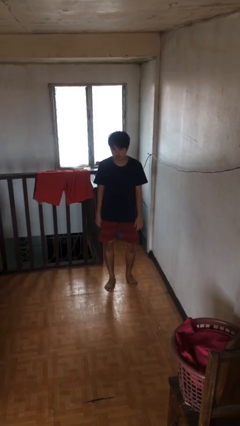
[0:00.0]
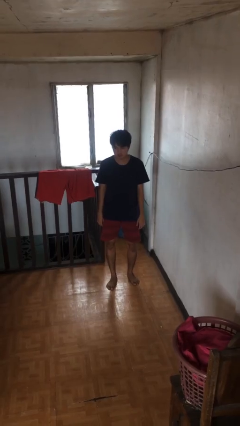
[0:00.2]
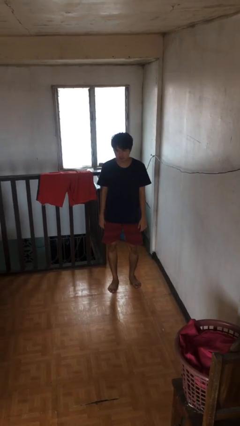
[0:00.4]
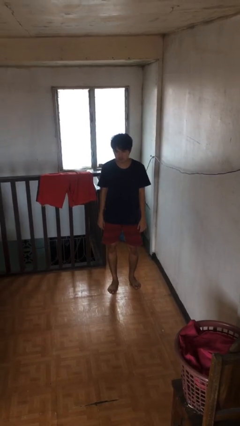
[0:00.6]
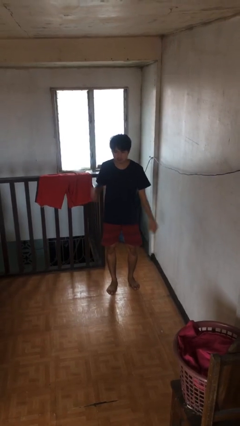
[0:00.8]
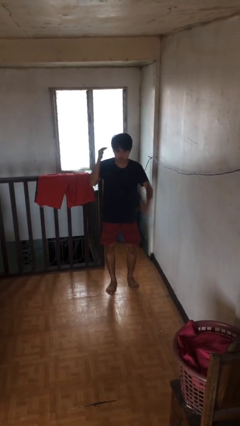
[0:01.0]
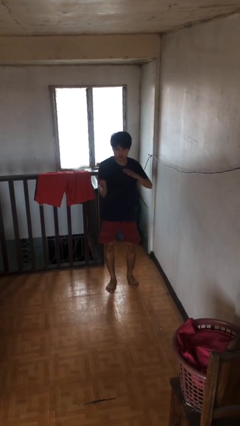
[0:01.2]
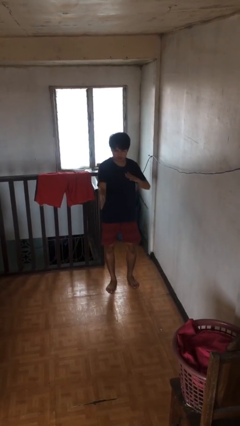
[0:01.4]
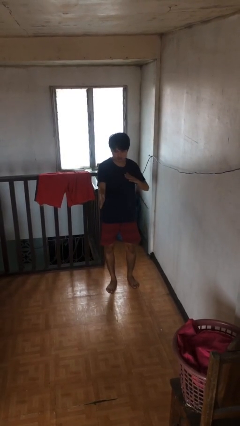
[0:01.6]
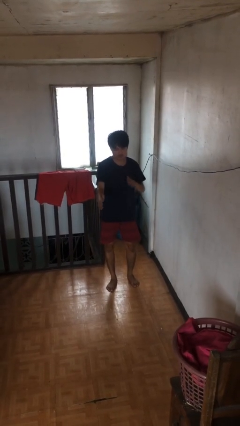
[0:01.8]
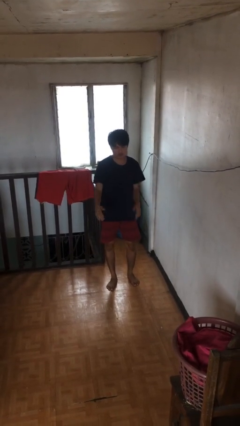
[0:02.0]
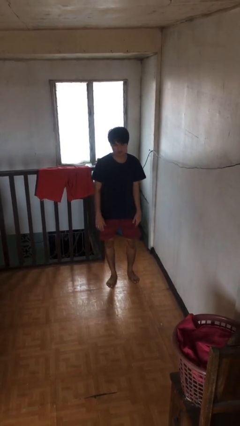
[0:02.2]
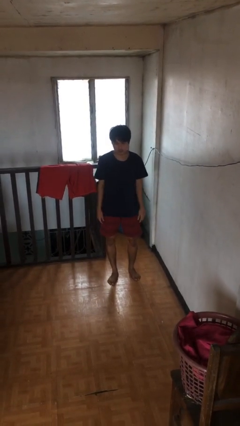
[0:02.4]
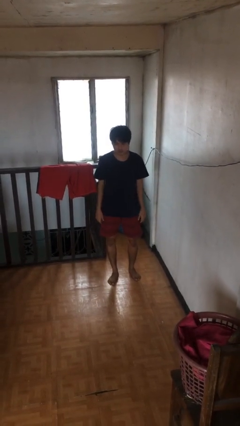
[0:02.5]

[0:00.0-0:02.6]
person karate chop

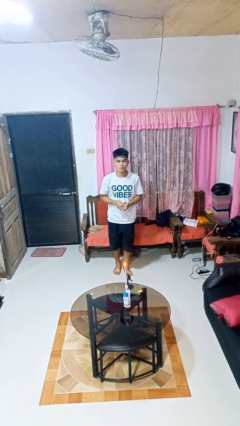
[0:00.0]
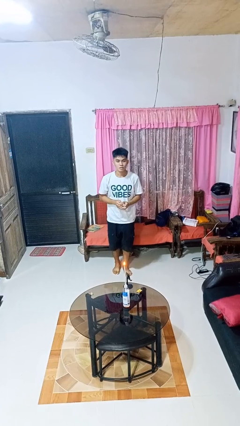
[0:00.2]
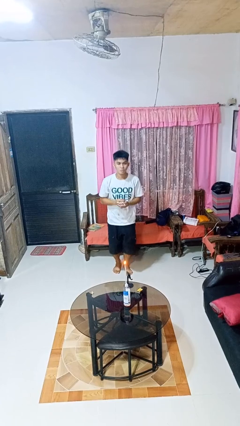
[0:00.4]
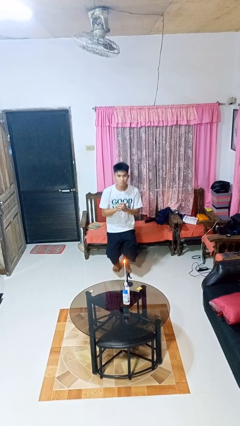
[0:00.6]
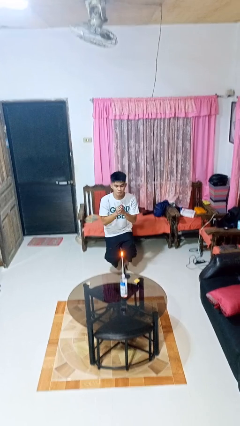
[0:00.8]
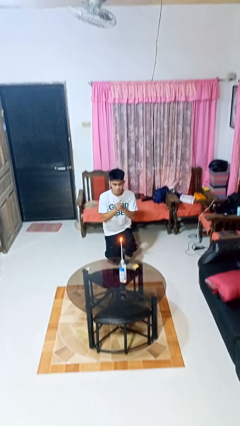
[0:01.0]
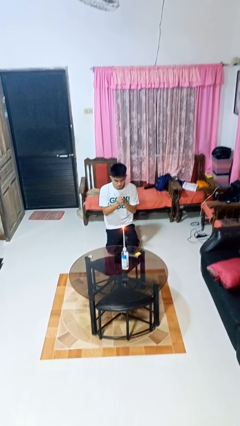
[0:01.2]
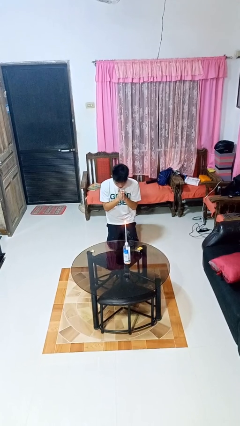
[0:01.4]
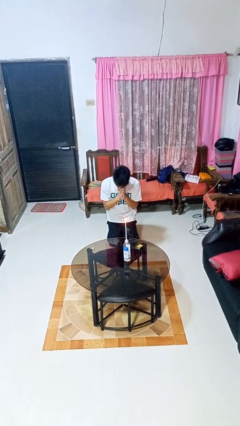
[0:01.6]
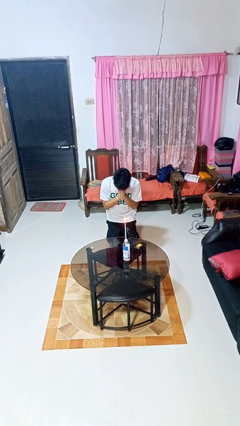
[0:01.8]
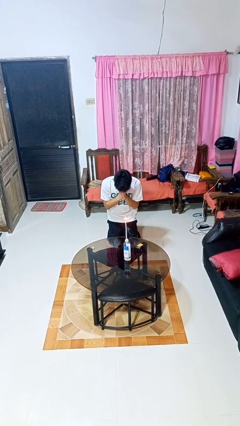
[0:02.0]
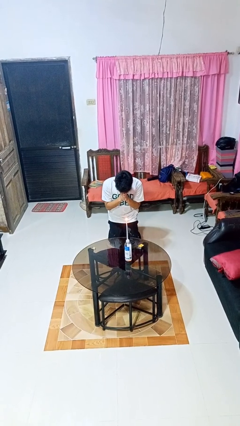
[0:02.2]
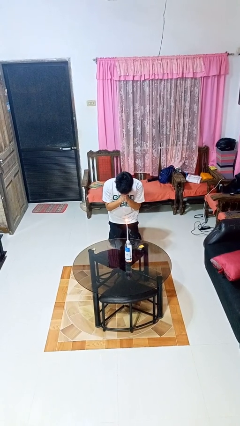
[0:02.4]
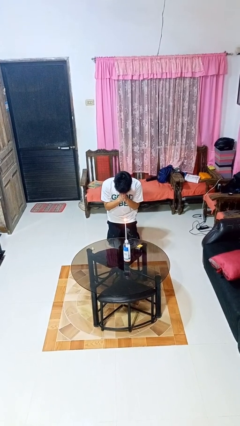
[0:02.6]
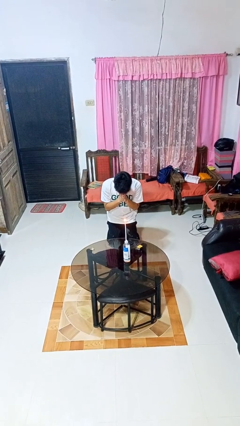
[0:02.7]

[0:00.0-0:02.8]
person prays

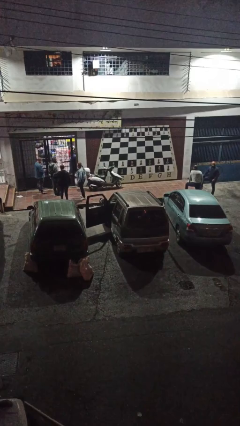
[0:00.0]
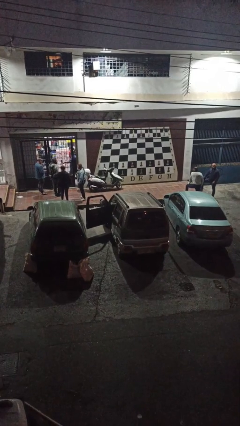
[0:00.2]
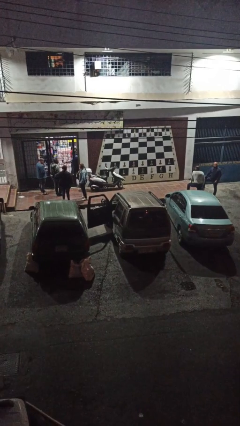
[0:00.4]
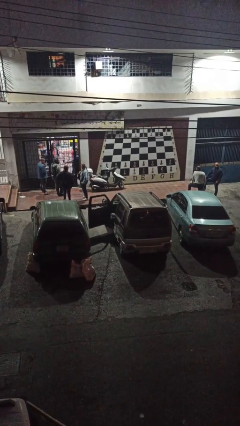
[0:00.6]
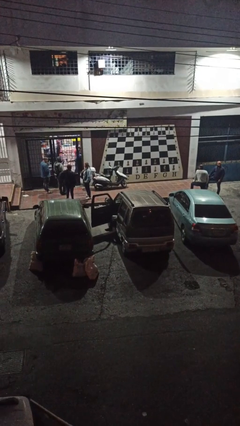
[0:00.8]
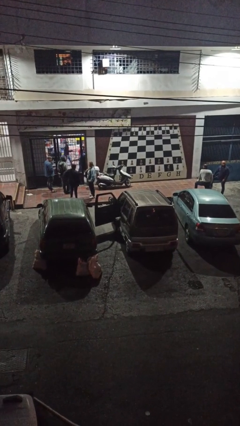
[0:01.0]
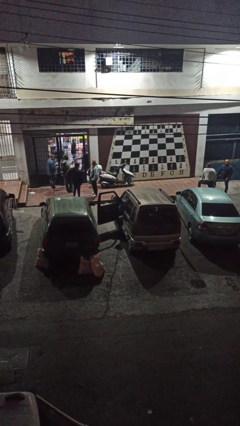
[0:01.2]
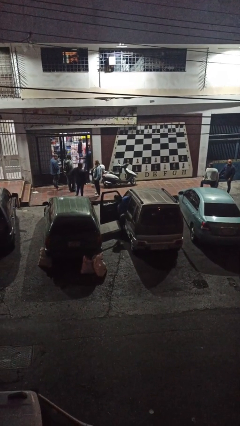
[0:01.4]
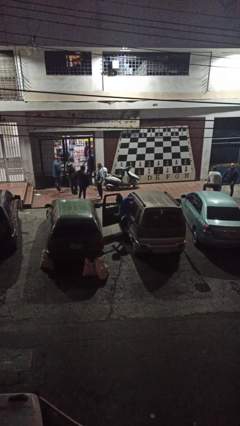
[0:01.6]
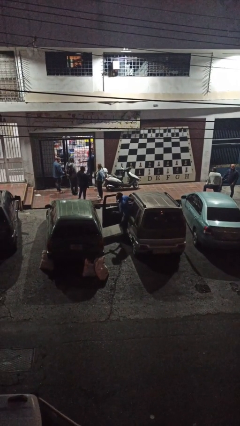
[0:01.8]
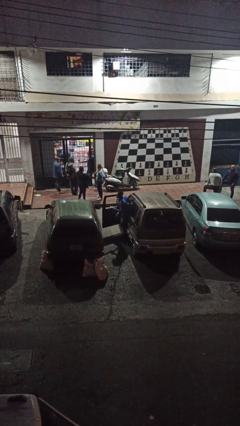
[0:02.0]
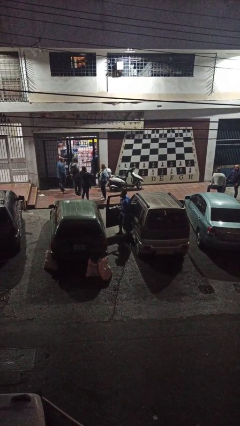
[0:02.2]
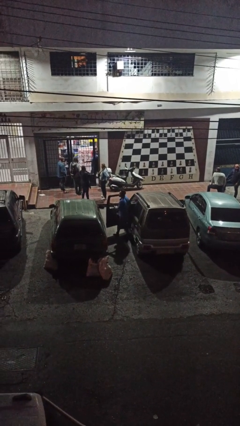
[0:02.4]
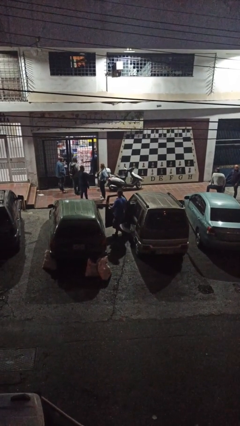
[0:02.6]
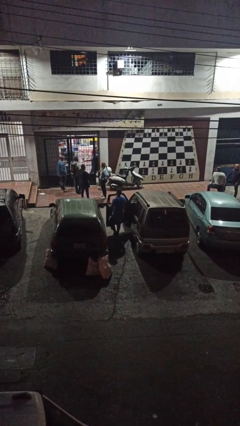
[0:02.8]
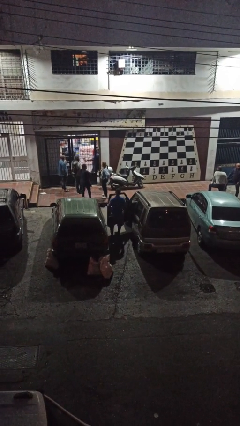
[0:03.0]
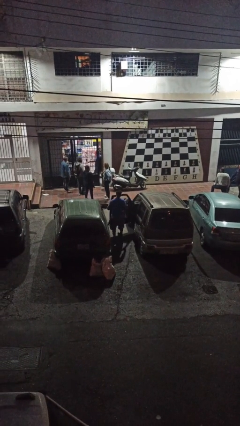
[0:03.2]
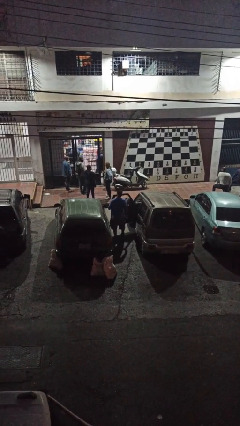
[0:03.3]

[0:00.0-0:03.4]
person exits car

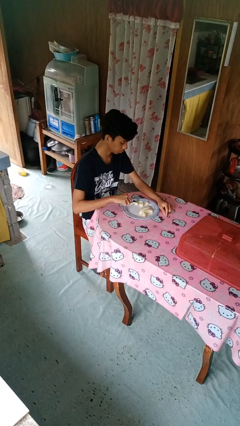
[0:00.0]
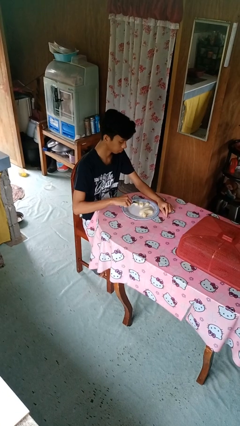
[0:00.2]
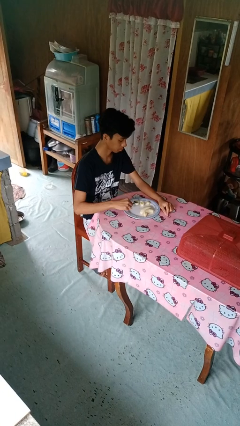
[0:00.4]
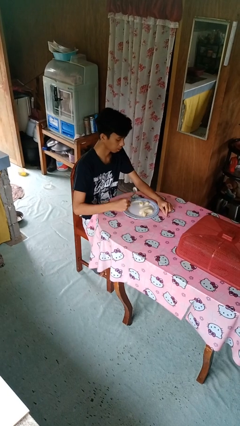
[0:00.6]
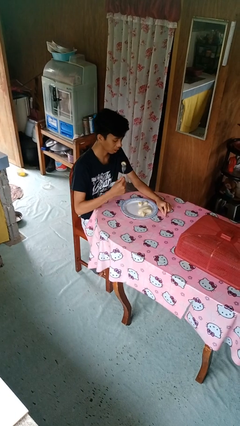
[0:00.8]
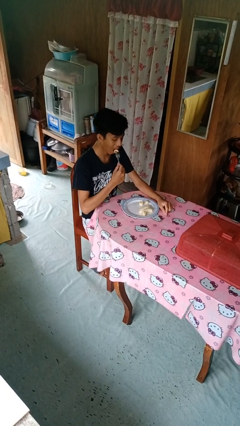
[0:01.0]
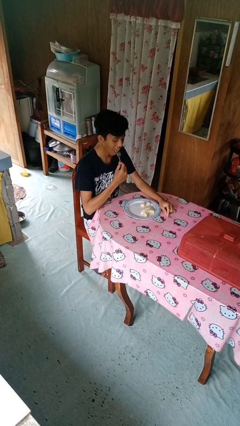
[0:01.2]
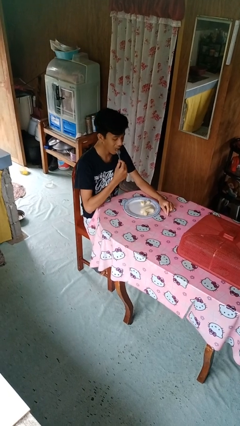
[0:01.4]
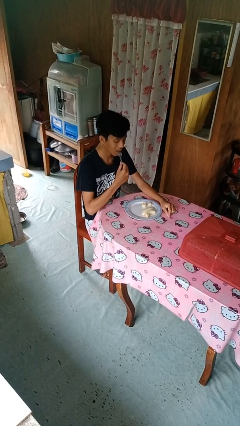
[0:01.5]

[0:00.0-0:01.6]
person eats with utensil

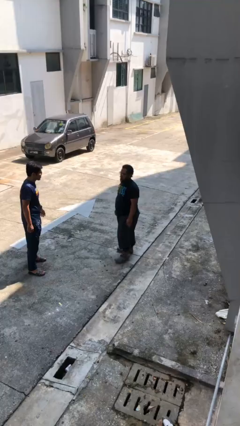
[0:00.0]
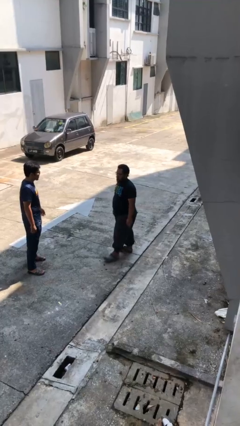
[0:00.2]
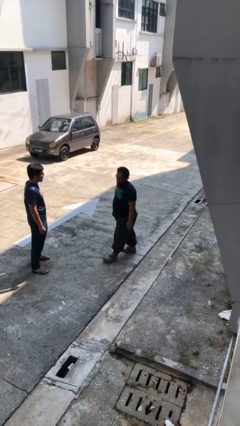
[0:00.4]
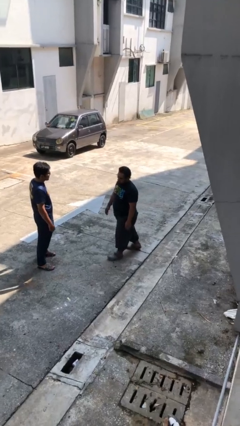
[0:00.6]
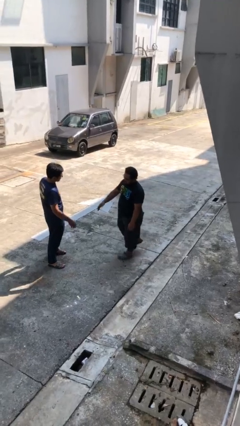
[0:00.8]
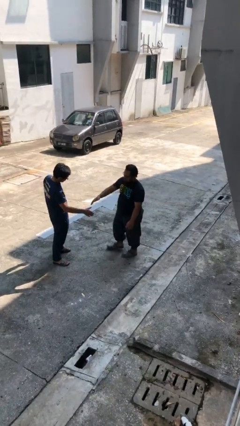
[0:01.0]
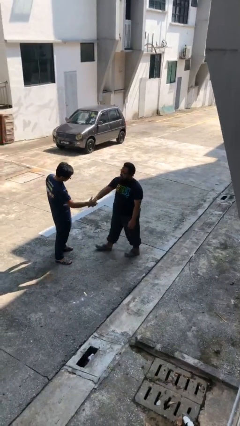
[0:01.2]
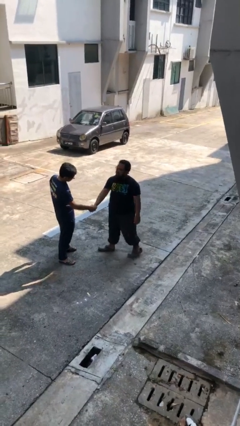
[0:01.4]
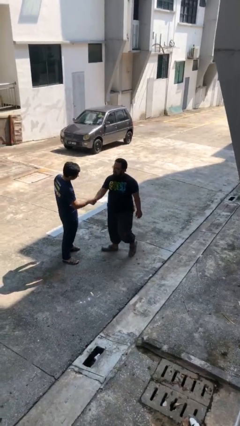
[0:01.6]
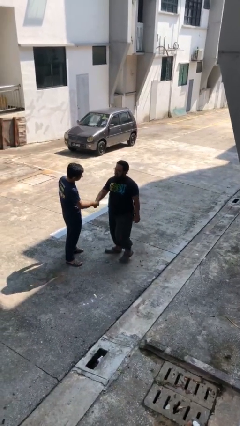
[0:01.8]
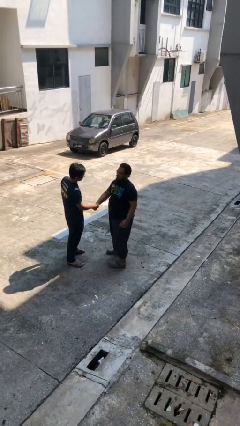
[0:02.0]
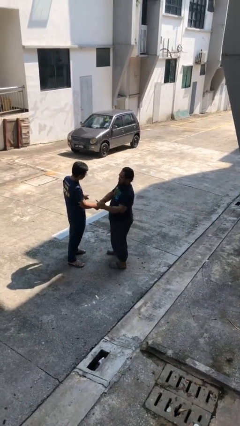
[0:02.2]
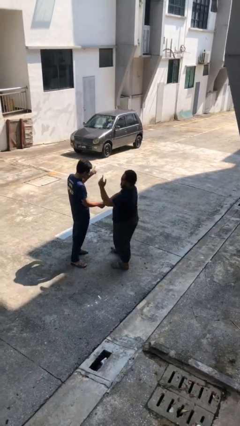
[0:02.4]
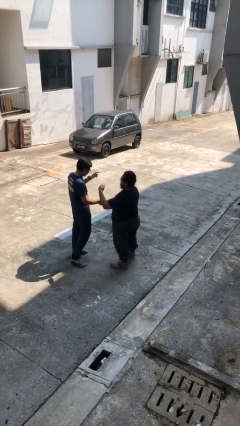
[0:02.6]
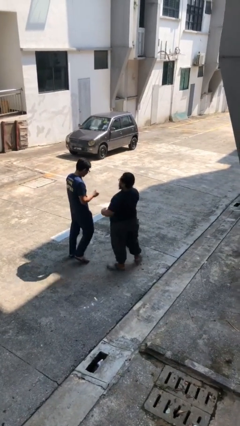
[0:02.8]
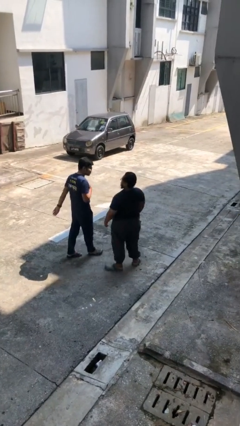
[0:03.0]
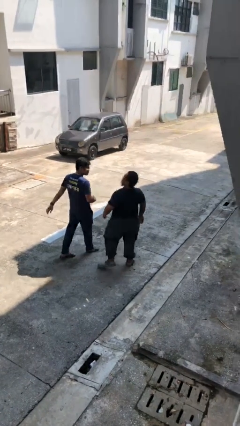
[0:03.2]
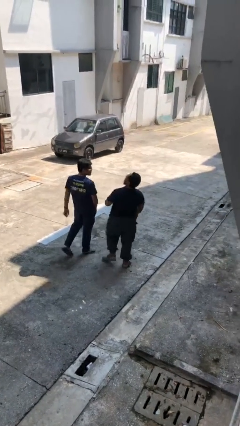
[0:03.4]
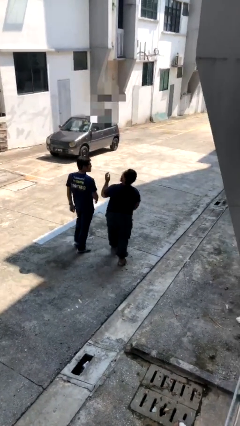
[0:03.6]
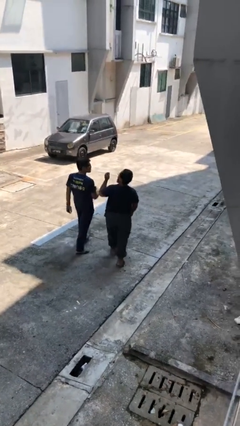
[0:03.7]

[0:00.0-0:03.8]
person shakes hand

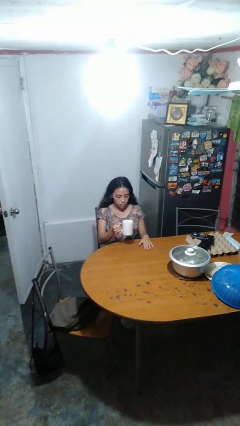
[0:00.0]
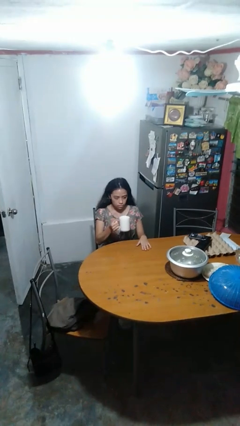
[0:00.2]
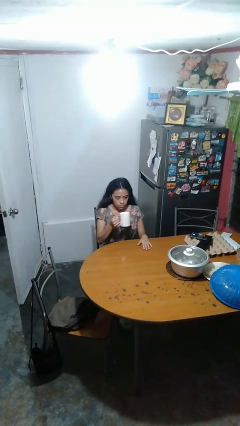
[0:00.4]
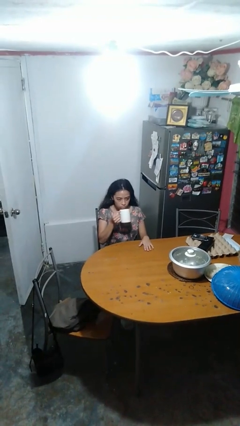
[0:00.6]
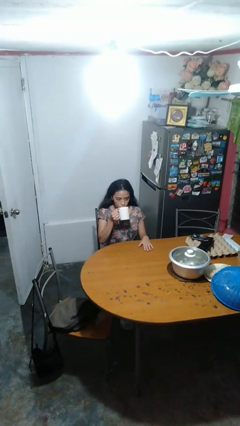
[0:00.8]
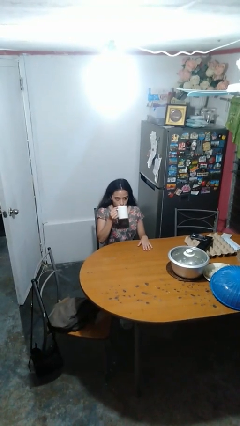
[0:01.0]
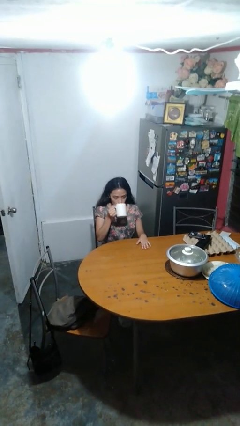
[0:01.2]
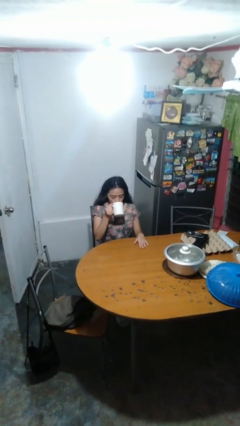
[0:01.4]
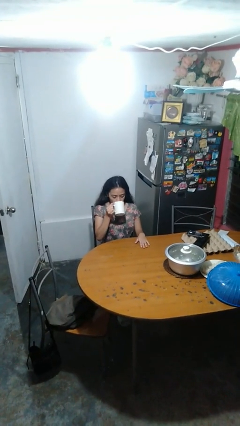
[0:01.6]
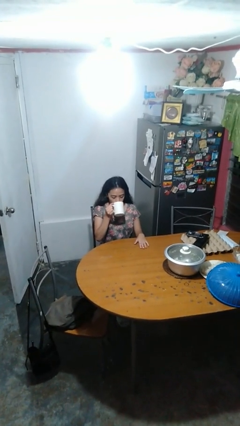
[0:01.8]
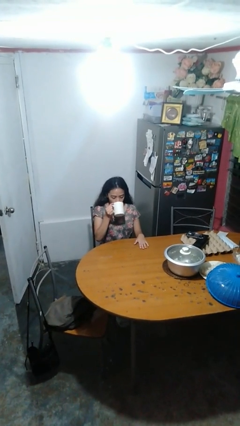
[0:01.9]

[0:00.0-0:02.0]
person drinks from mug

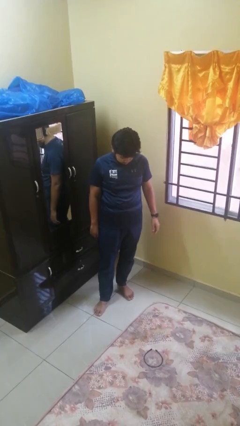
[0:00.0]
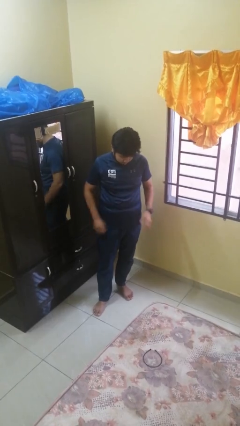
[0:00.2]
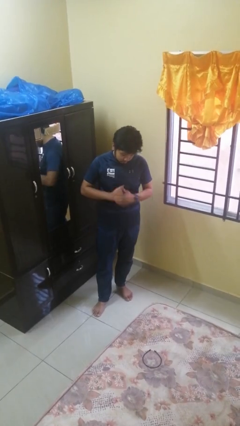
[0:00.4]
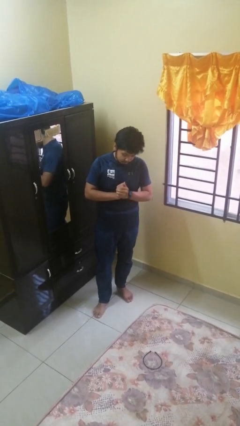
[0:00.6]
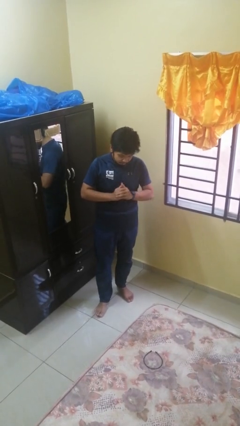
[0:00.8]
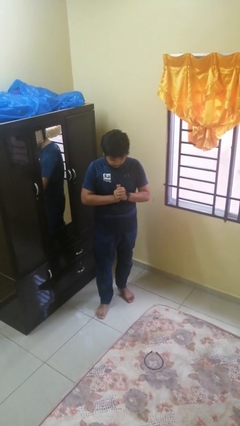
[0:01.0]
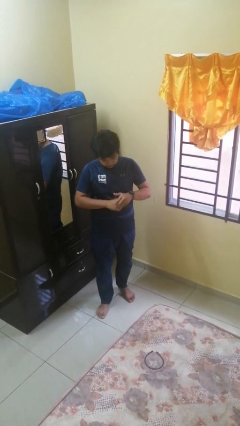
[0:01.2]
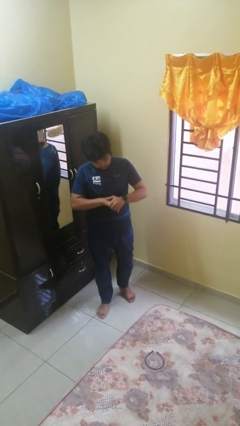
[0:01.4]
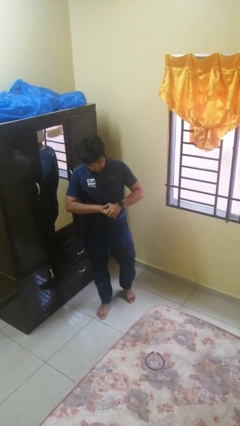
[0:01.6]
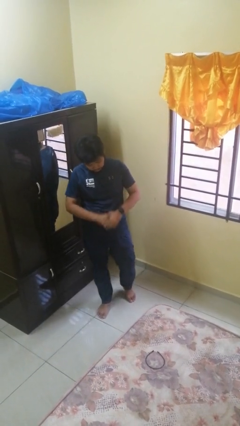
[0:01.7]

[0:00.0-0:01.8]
person cracks knuckles
